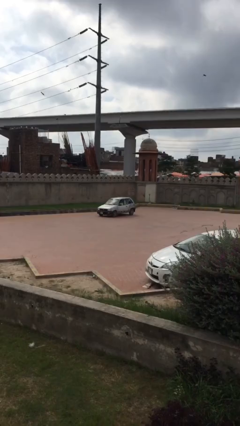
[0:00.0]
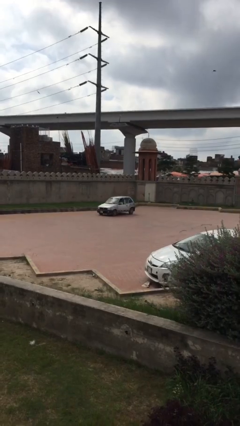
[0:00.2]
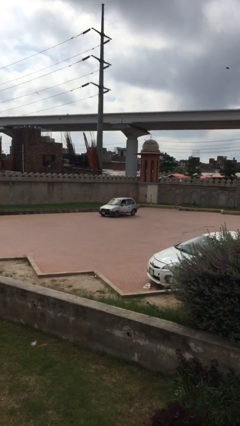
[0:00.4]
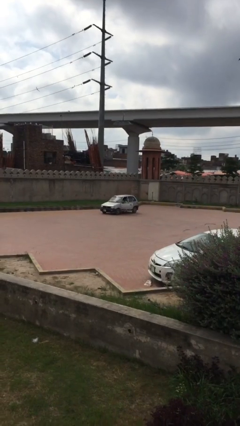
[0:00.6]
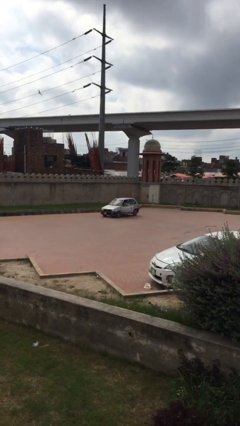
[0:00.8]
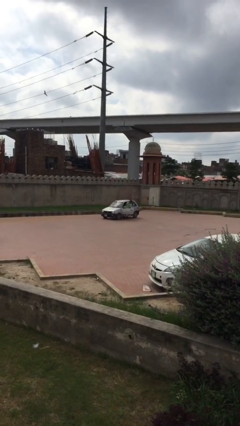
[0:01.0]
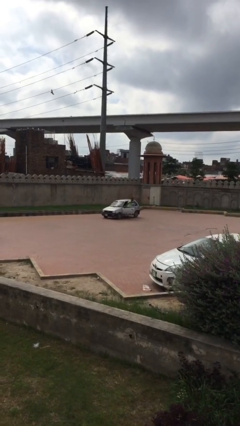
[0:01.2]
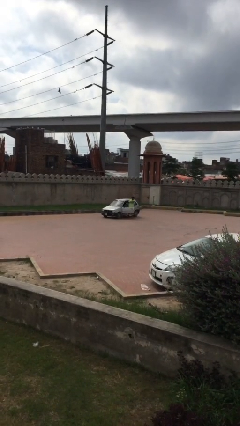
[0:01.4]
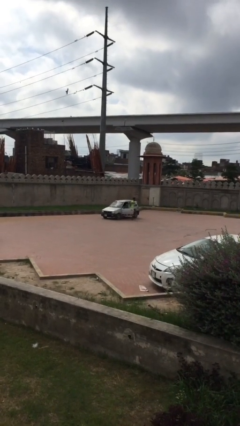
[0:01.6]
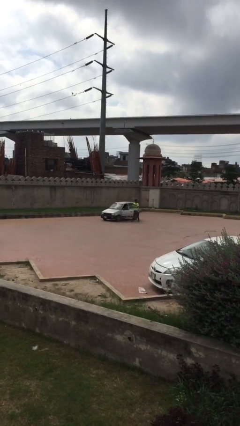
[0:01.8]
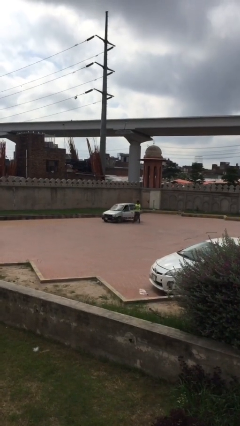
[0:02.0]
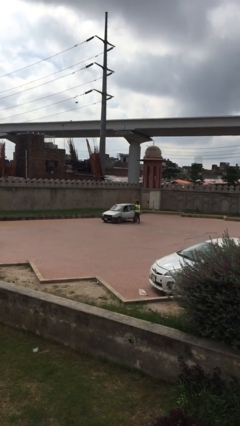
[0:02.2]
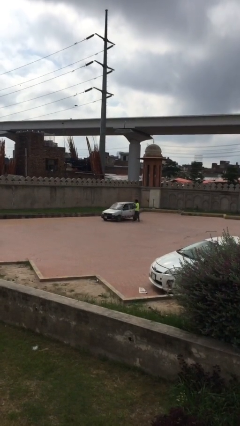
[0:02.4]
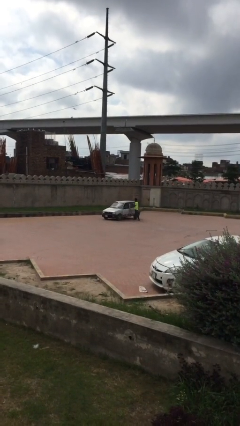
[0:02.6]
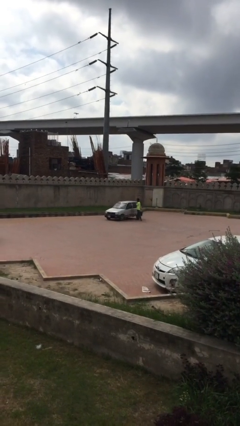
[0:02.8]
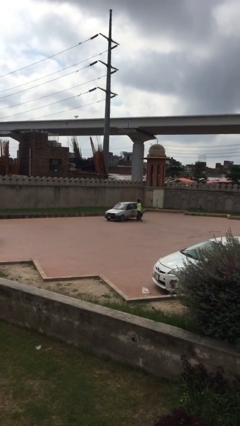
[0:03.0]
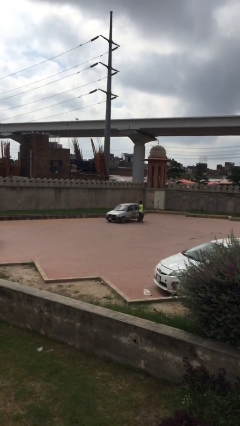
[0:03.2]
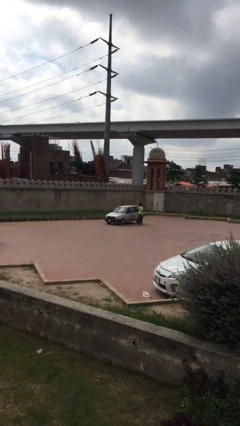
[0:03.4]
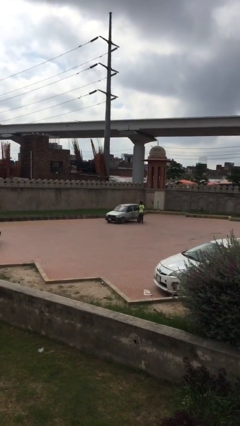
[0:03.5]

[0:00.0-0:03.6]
car drops off person

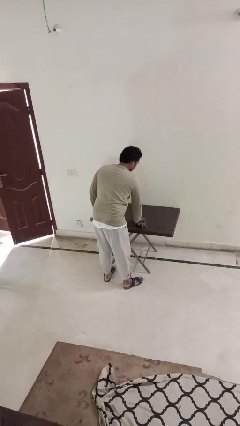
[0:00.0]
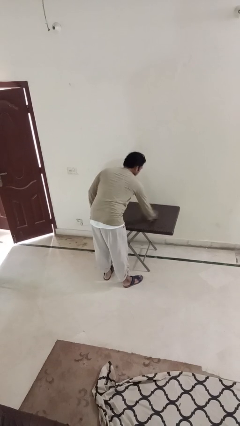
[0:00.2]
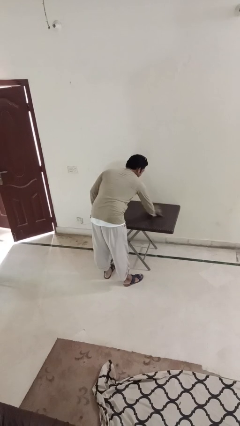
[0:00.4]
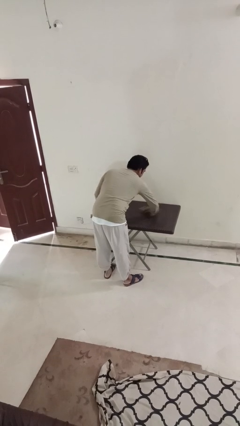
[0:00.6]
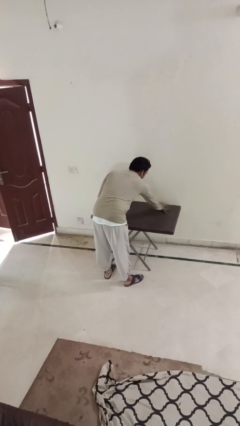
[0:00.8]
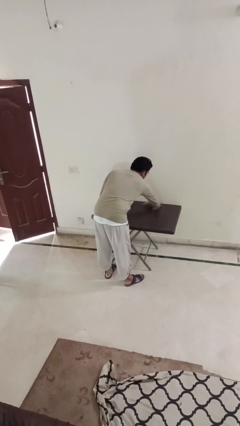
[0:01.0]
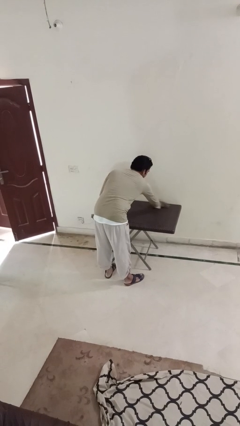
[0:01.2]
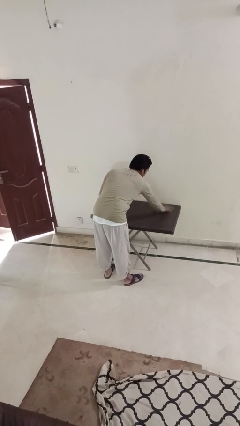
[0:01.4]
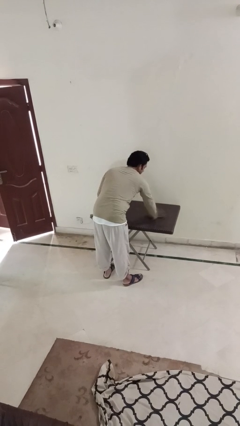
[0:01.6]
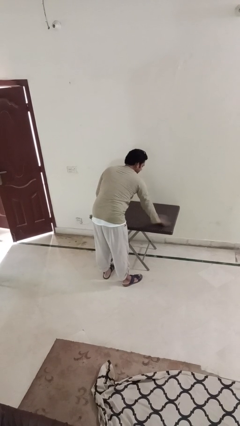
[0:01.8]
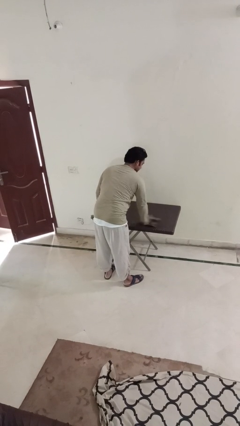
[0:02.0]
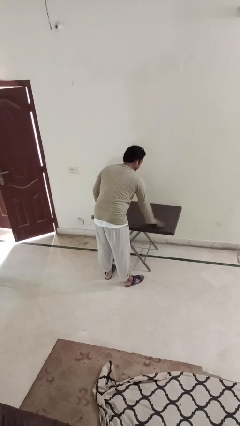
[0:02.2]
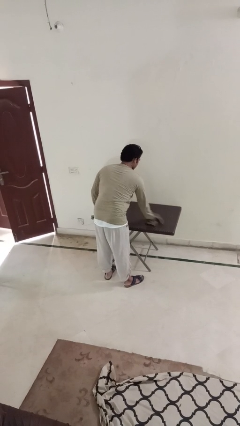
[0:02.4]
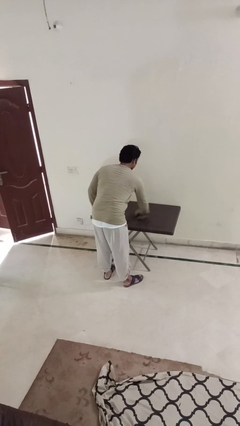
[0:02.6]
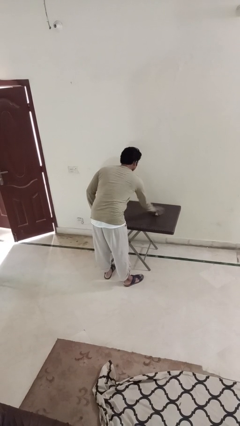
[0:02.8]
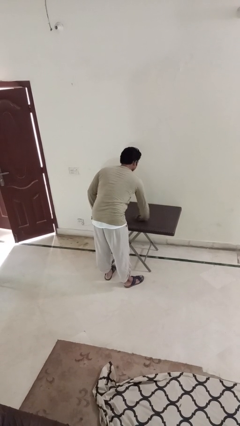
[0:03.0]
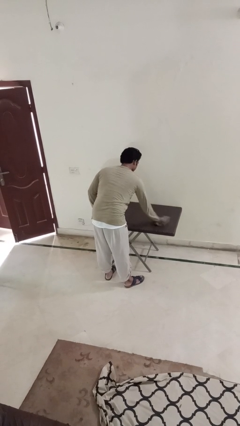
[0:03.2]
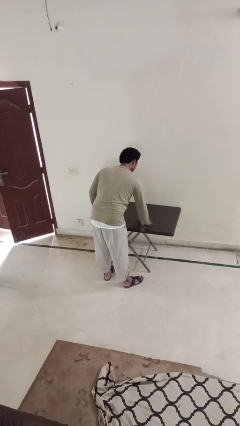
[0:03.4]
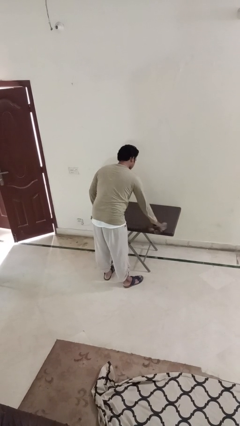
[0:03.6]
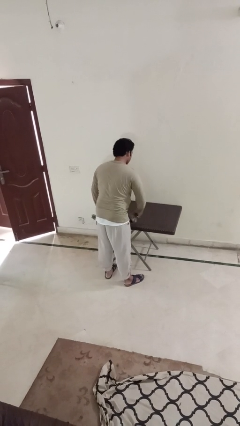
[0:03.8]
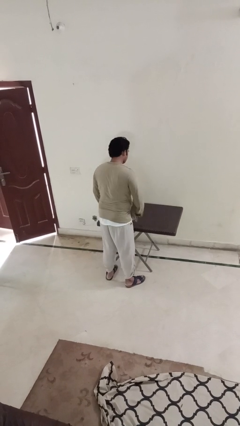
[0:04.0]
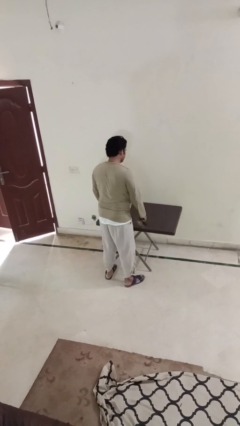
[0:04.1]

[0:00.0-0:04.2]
person cleans table with rag

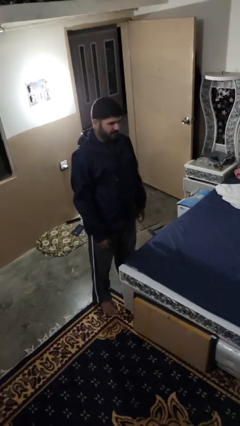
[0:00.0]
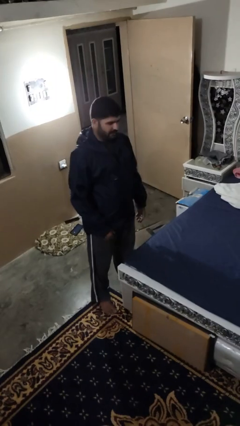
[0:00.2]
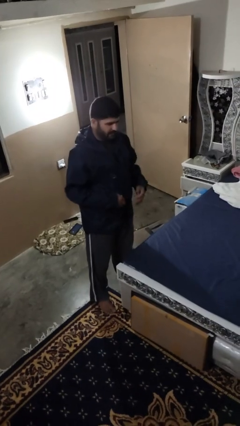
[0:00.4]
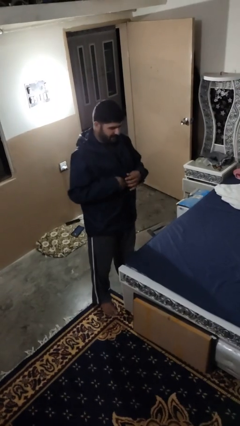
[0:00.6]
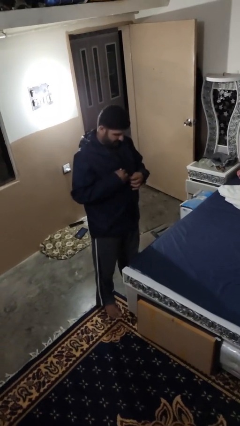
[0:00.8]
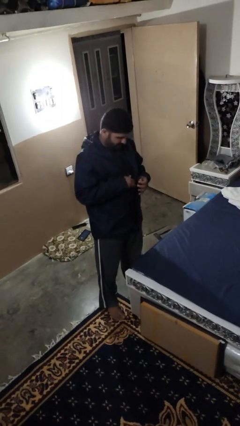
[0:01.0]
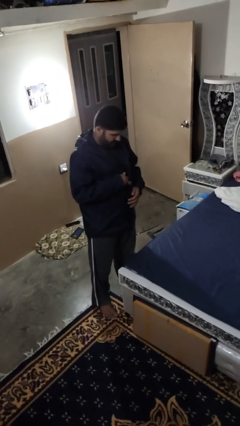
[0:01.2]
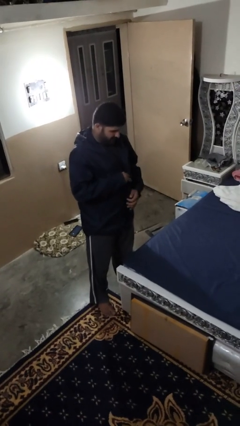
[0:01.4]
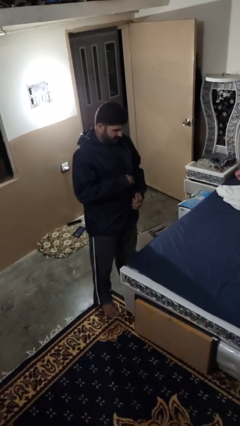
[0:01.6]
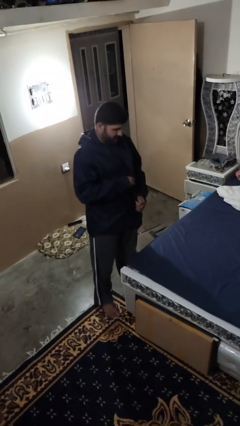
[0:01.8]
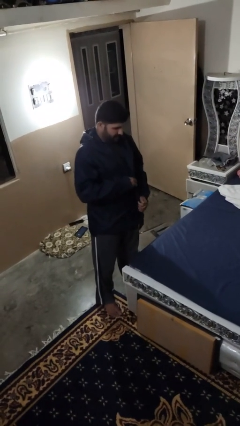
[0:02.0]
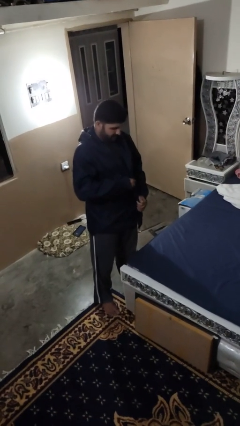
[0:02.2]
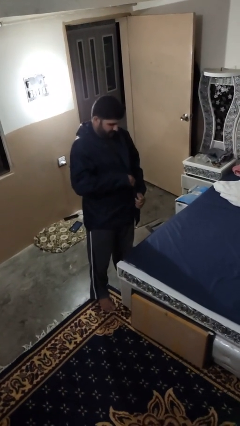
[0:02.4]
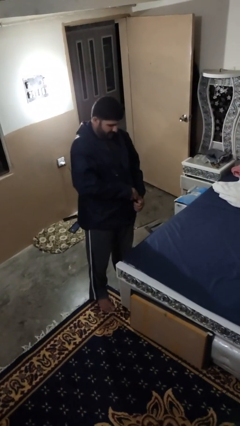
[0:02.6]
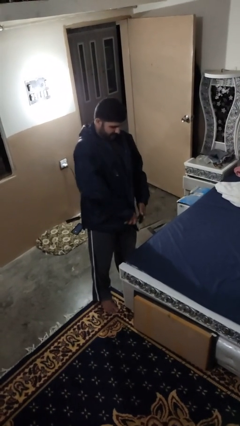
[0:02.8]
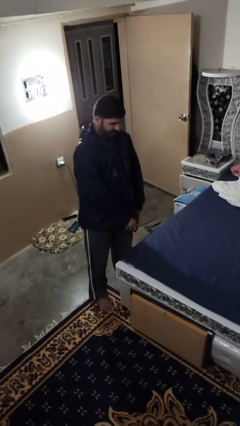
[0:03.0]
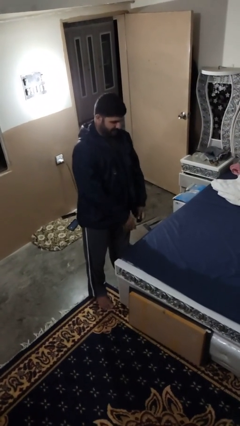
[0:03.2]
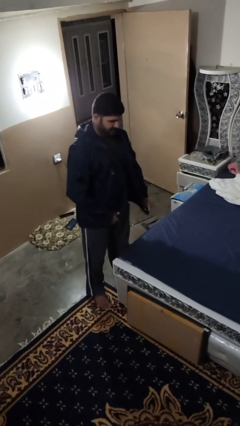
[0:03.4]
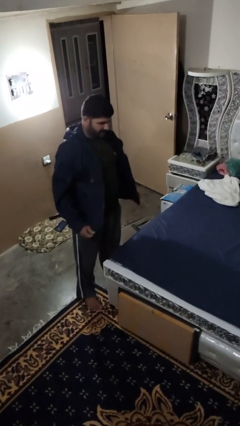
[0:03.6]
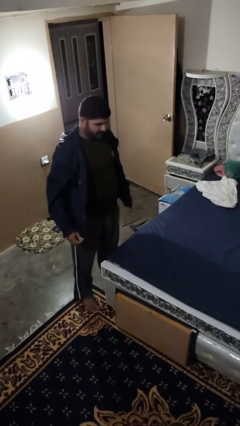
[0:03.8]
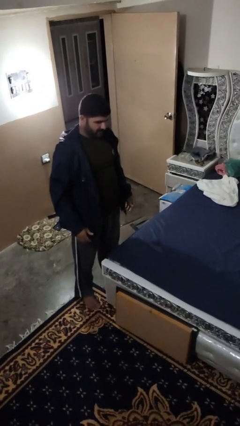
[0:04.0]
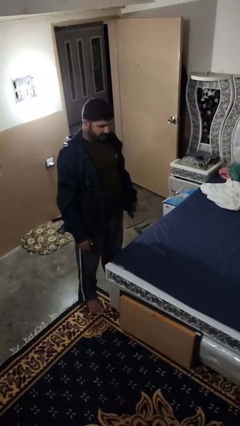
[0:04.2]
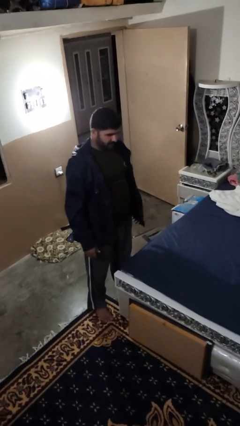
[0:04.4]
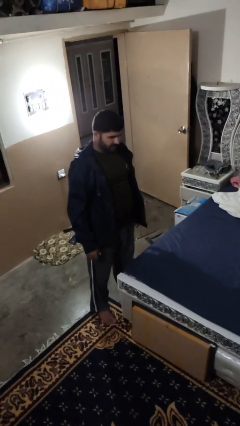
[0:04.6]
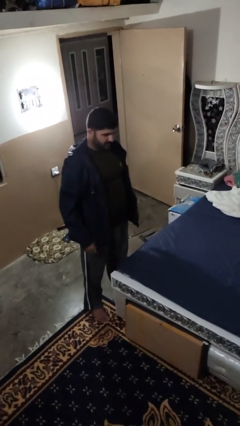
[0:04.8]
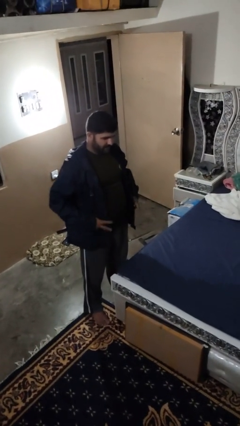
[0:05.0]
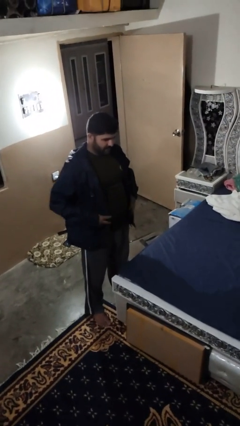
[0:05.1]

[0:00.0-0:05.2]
person unzips jacket

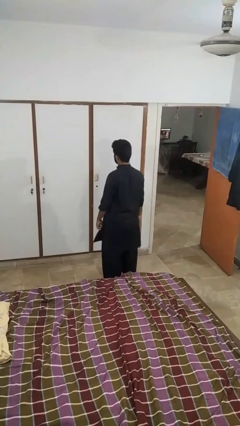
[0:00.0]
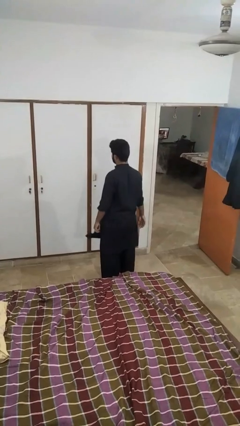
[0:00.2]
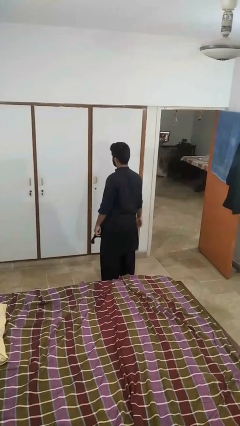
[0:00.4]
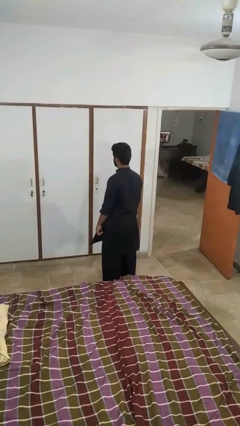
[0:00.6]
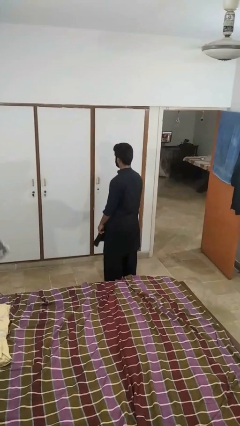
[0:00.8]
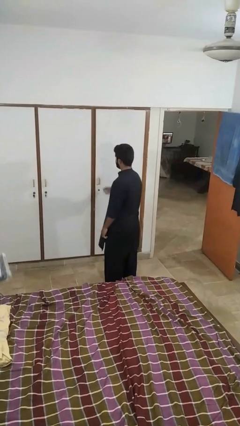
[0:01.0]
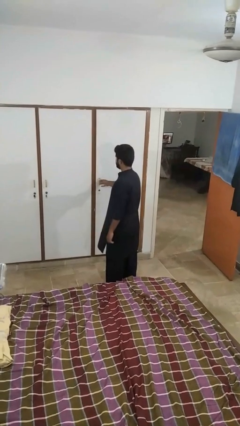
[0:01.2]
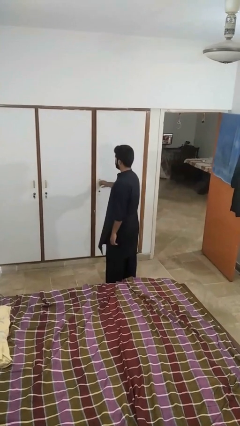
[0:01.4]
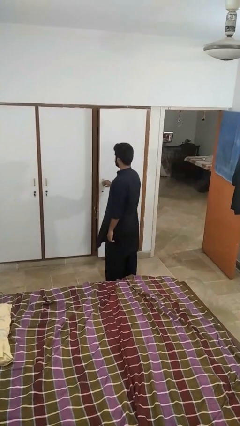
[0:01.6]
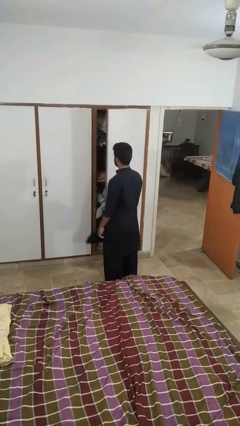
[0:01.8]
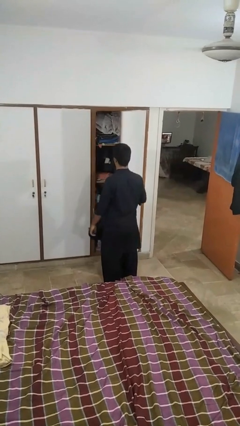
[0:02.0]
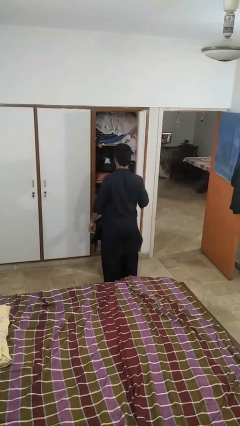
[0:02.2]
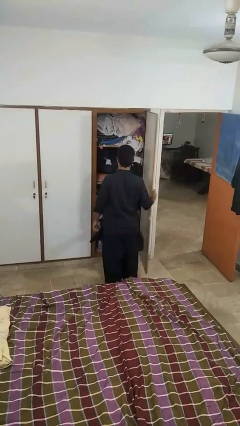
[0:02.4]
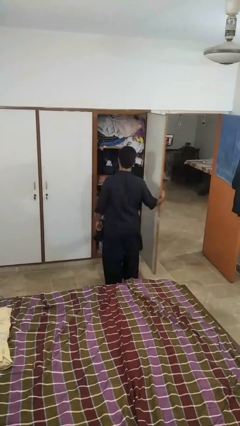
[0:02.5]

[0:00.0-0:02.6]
person opens closet door

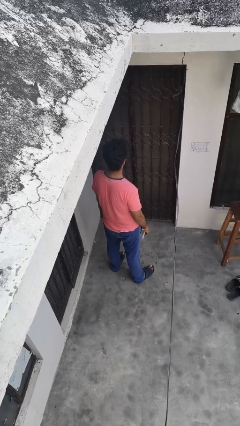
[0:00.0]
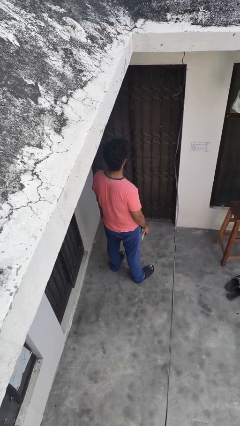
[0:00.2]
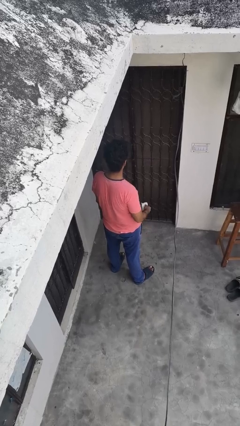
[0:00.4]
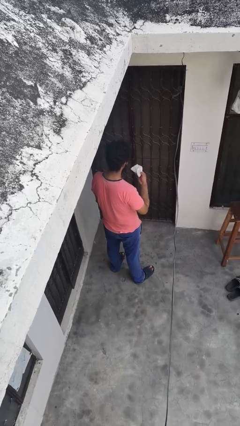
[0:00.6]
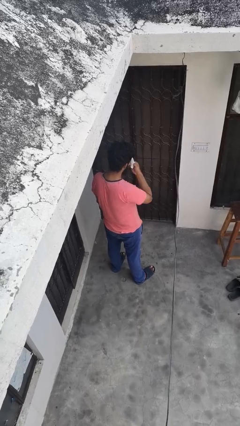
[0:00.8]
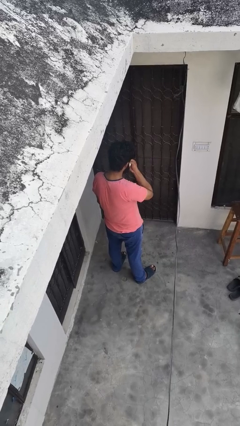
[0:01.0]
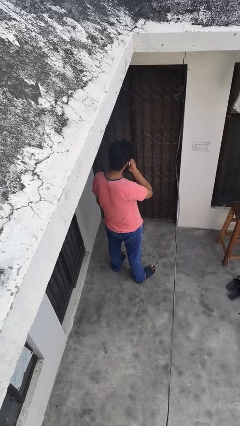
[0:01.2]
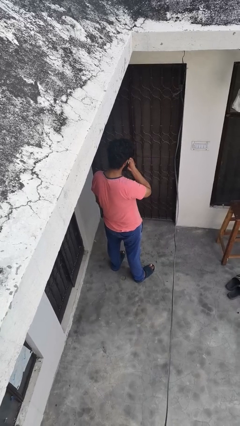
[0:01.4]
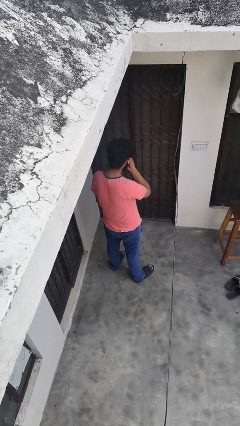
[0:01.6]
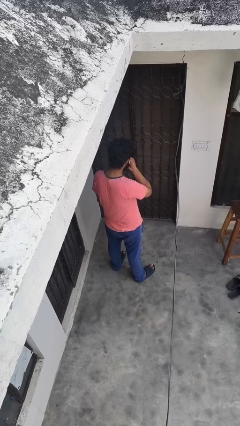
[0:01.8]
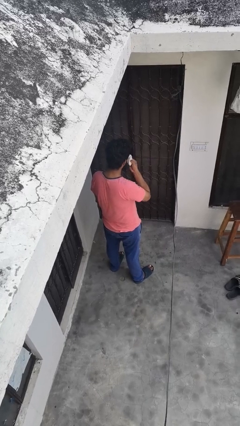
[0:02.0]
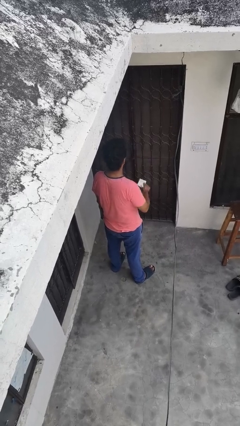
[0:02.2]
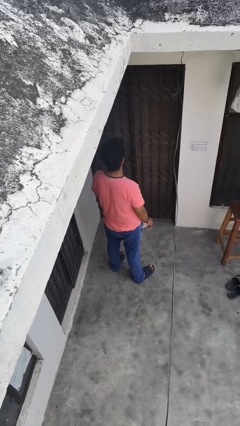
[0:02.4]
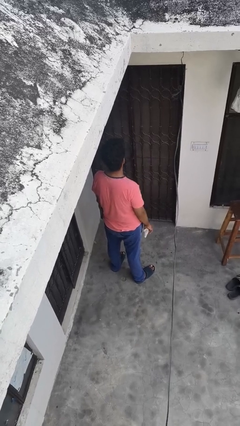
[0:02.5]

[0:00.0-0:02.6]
person wipes mouth with napkin
